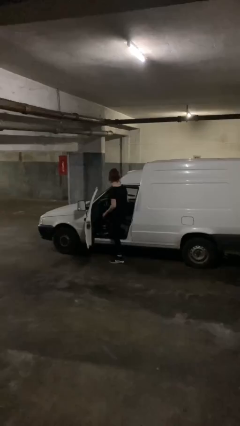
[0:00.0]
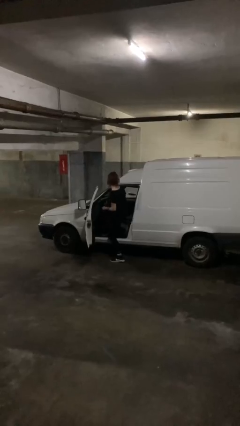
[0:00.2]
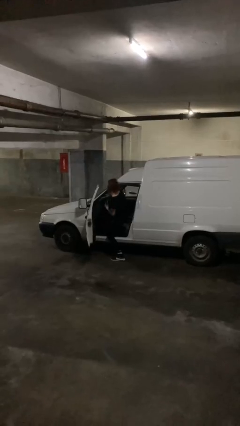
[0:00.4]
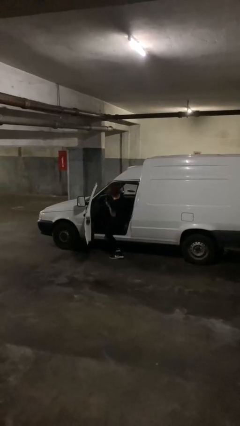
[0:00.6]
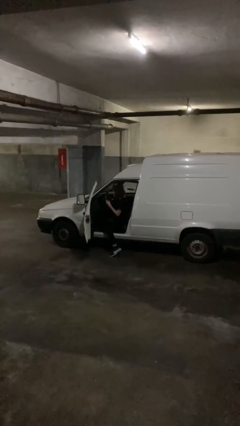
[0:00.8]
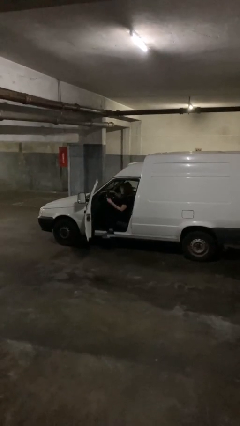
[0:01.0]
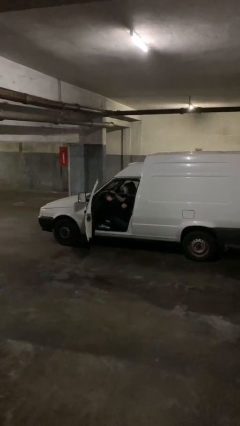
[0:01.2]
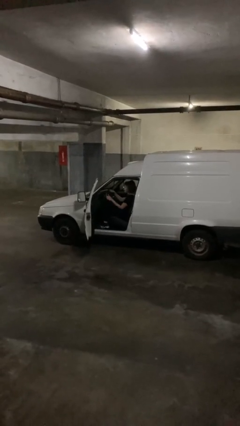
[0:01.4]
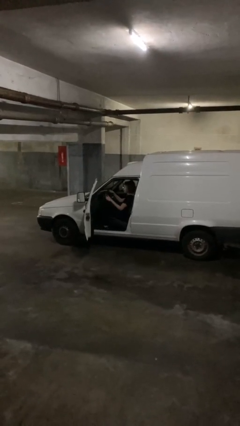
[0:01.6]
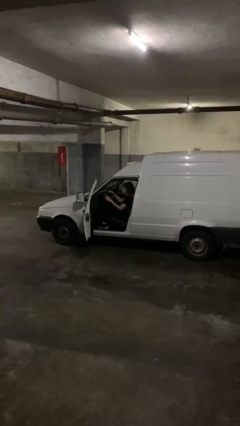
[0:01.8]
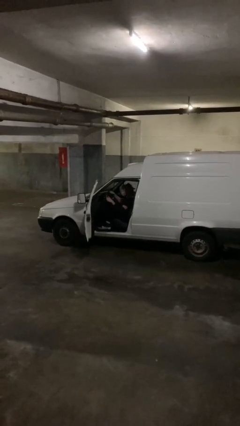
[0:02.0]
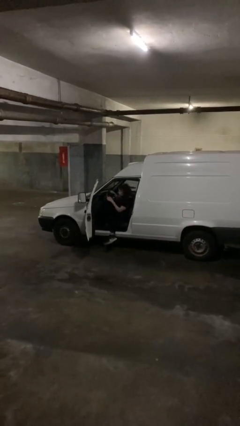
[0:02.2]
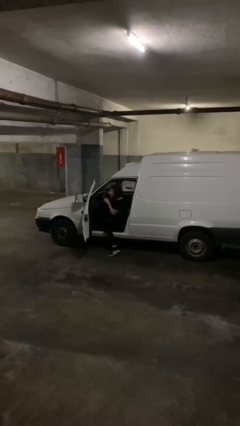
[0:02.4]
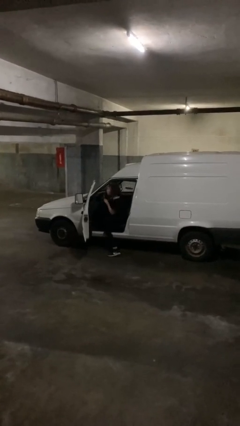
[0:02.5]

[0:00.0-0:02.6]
person enters car

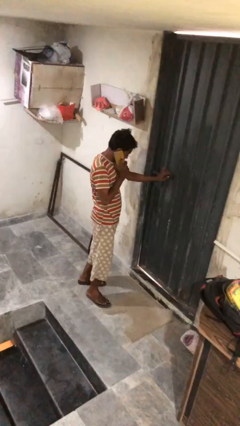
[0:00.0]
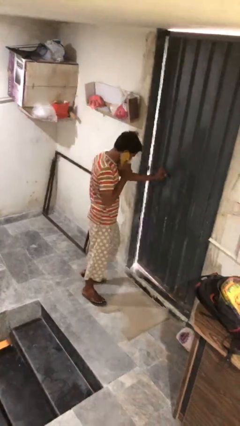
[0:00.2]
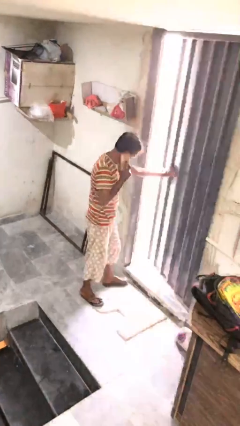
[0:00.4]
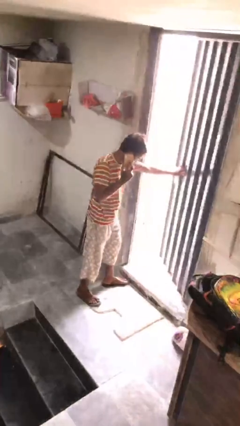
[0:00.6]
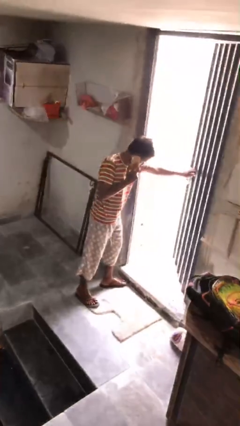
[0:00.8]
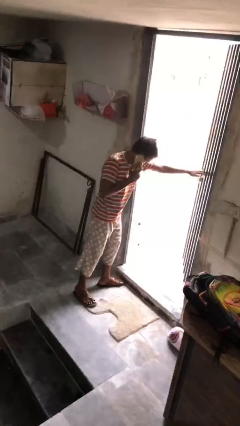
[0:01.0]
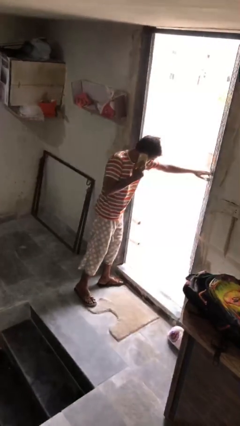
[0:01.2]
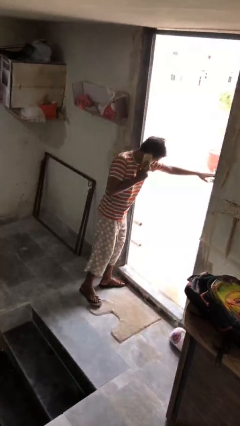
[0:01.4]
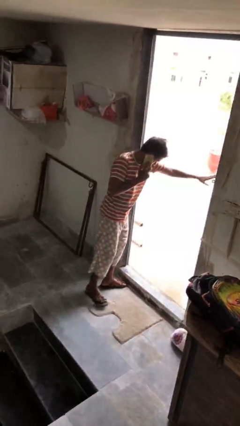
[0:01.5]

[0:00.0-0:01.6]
person opens facility door

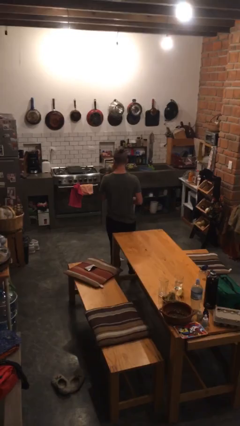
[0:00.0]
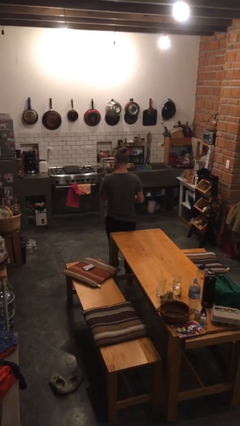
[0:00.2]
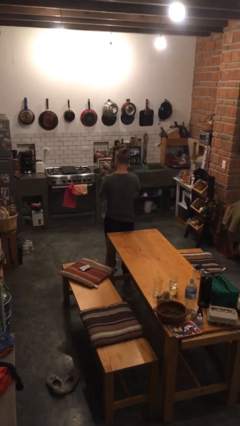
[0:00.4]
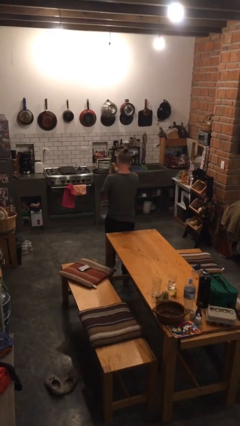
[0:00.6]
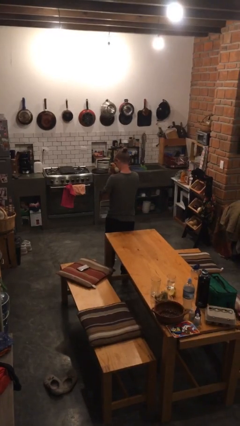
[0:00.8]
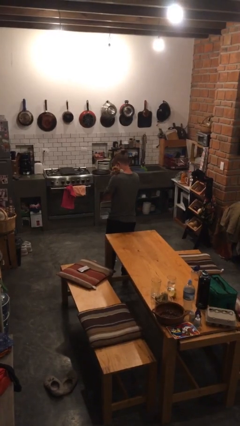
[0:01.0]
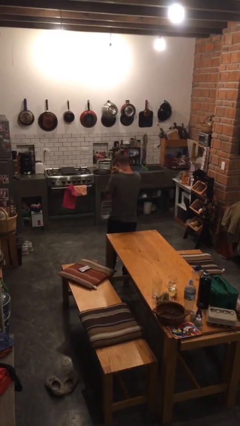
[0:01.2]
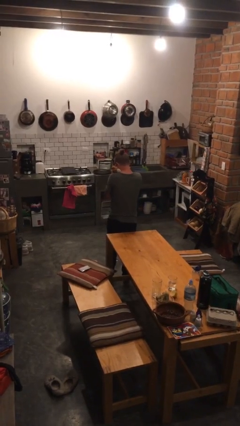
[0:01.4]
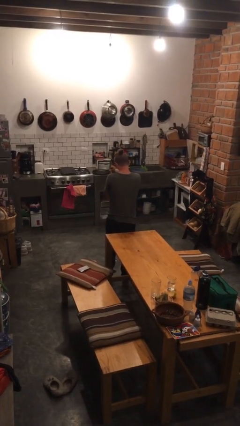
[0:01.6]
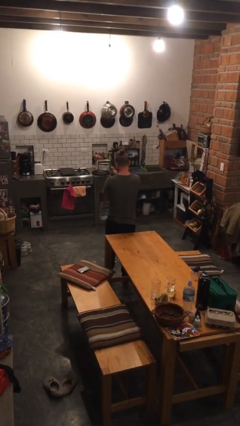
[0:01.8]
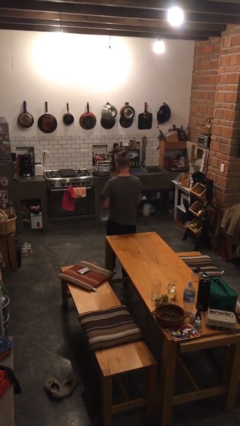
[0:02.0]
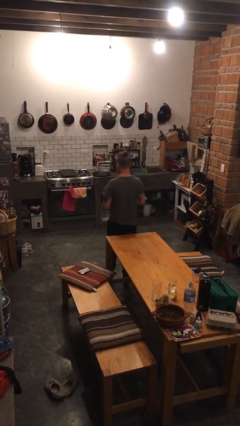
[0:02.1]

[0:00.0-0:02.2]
person hugs stuffed animal

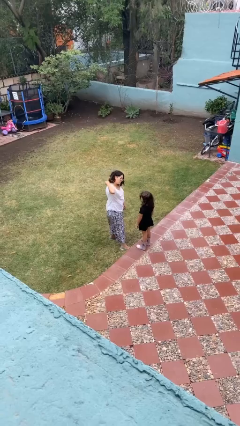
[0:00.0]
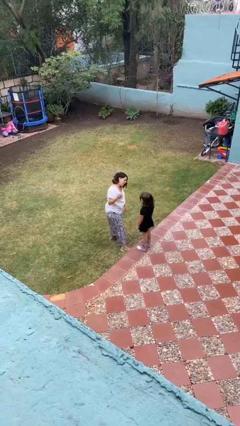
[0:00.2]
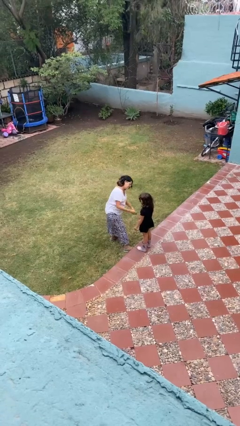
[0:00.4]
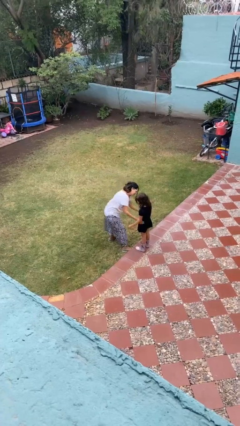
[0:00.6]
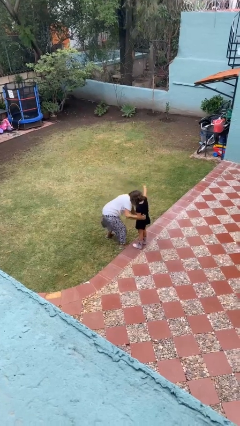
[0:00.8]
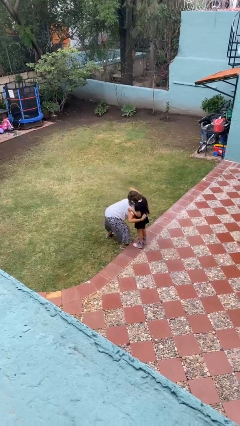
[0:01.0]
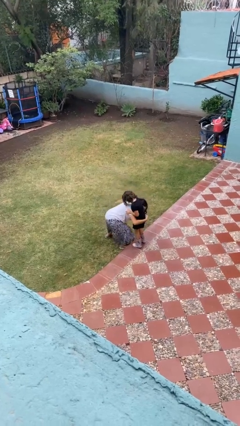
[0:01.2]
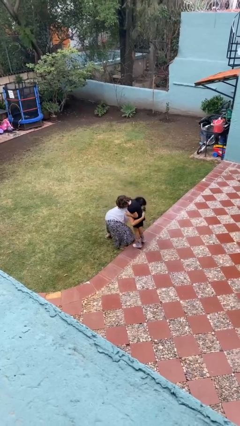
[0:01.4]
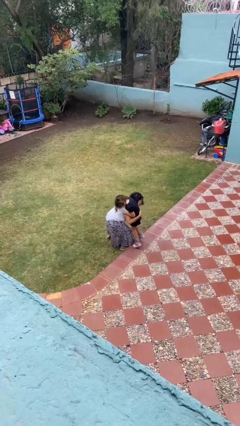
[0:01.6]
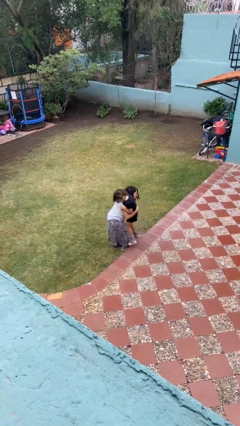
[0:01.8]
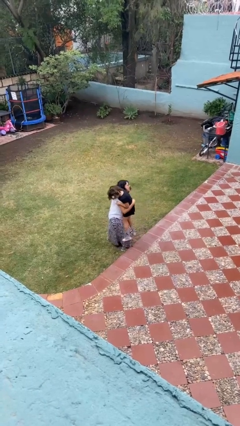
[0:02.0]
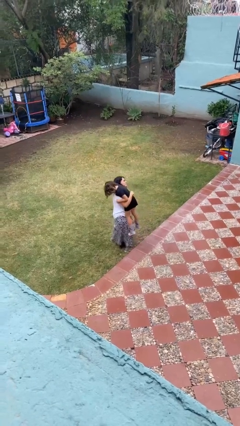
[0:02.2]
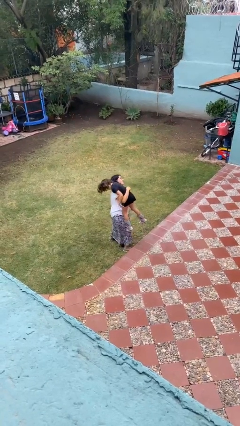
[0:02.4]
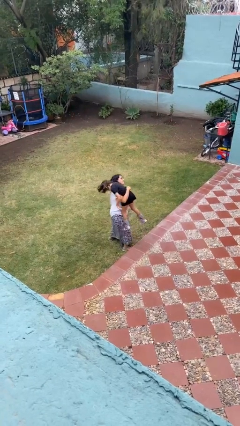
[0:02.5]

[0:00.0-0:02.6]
person carries person over shoulder

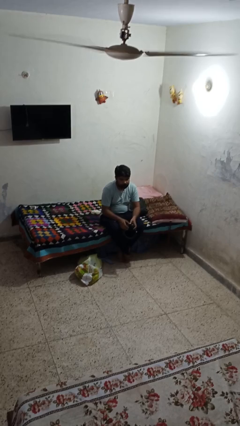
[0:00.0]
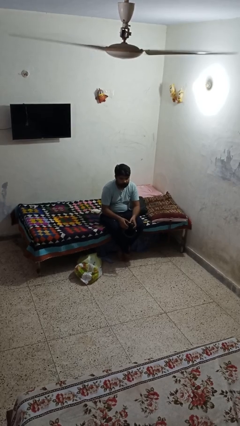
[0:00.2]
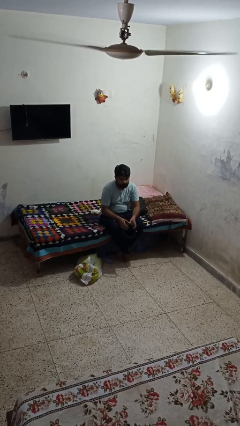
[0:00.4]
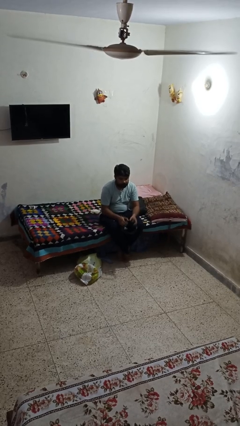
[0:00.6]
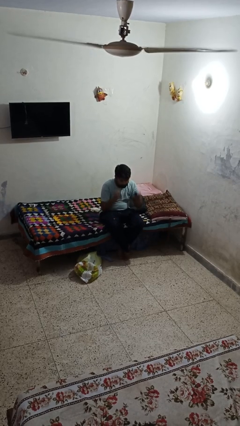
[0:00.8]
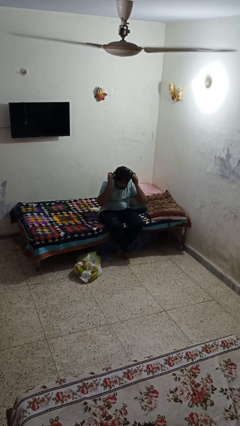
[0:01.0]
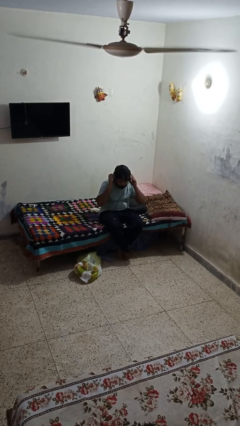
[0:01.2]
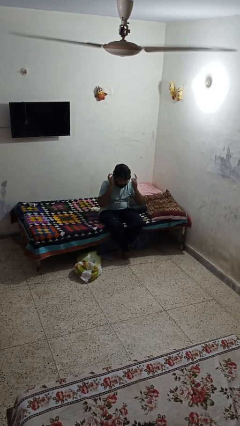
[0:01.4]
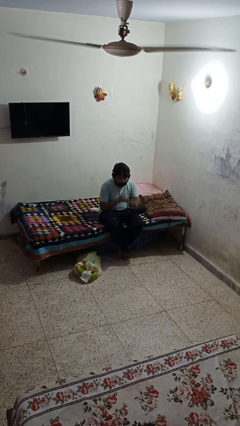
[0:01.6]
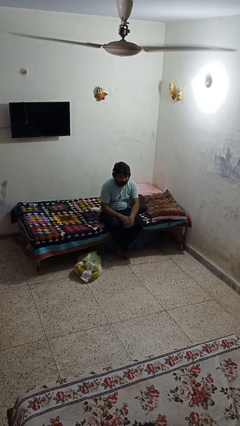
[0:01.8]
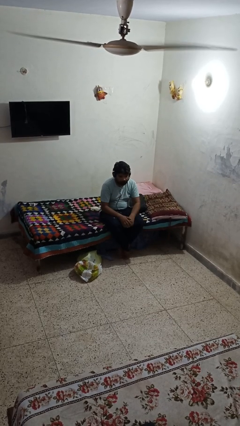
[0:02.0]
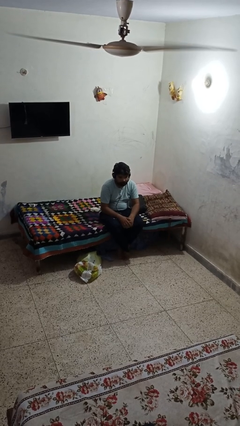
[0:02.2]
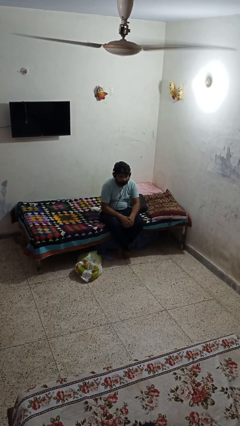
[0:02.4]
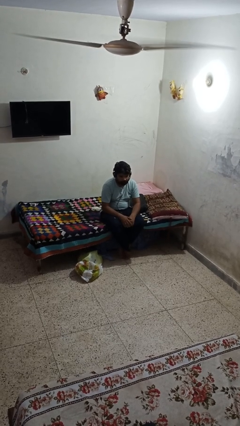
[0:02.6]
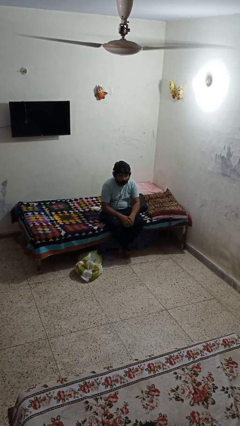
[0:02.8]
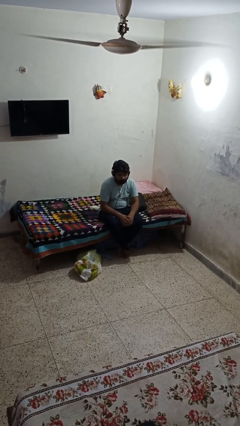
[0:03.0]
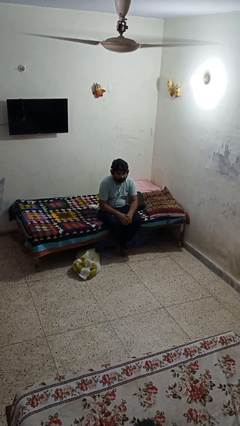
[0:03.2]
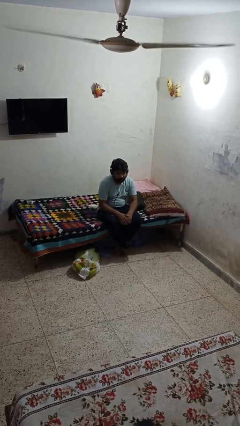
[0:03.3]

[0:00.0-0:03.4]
person puts on headphones

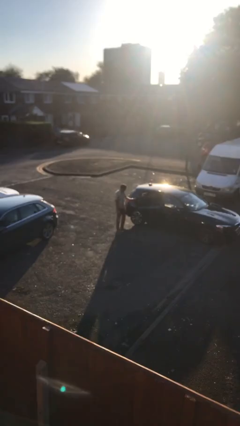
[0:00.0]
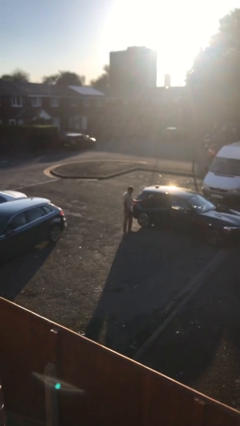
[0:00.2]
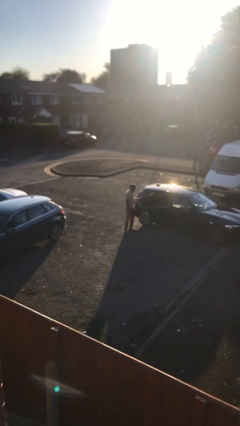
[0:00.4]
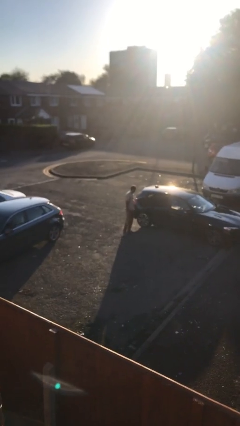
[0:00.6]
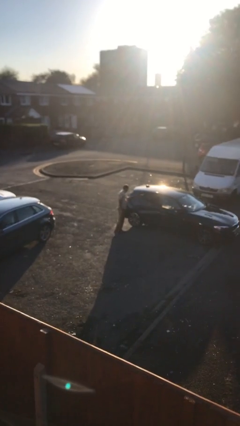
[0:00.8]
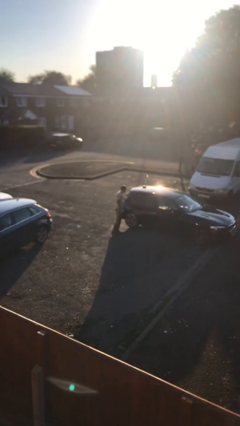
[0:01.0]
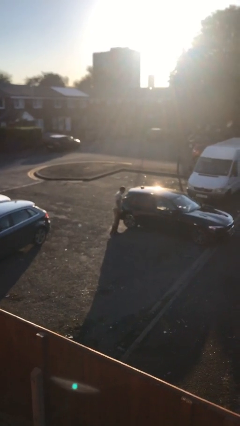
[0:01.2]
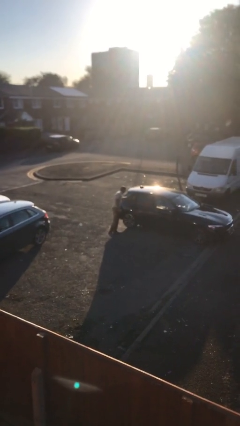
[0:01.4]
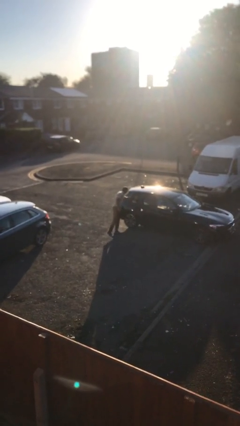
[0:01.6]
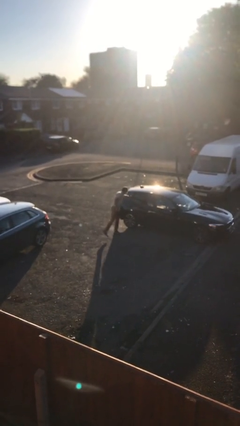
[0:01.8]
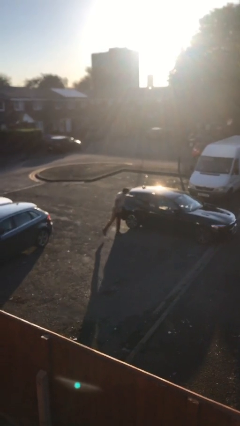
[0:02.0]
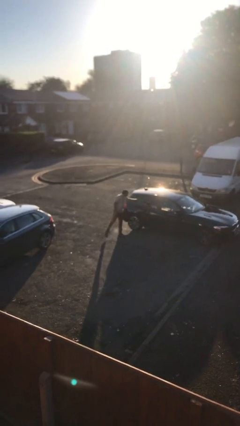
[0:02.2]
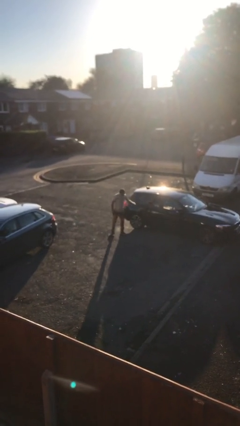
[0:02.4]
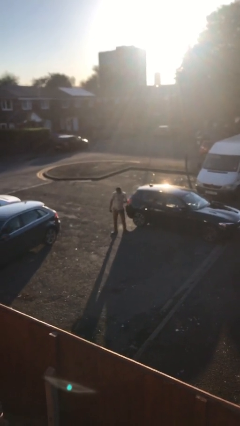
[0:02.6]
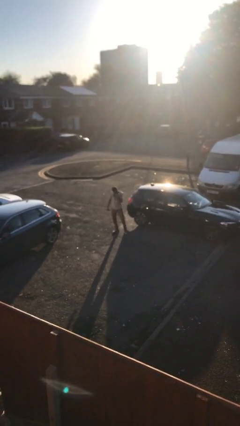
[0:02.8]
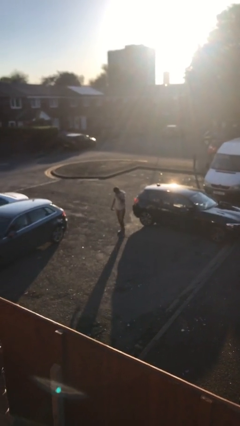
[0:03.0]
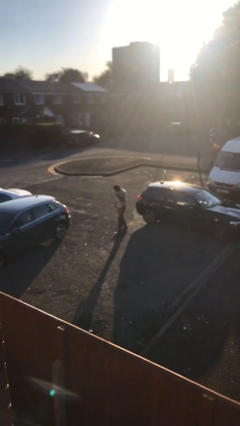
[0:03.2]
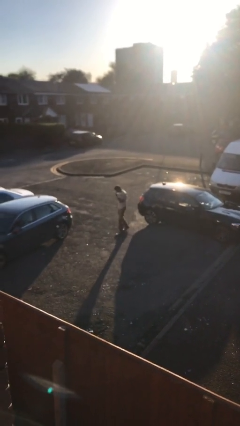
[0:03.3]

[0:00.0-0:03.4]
person closes car door

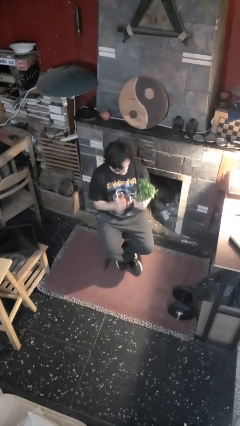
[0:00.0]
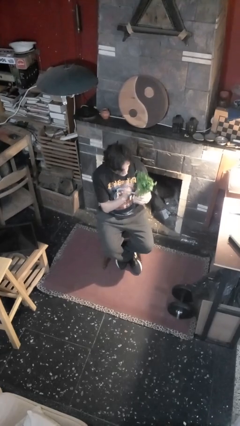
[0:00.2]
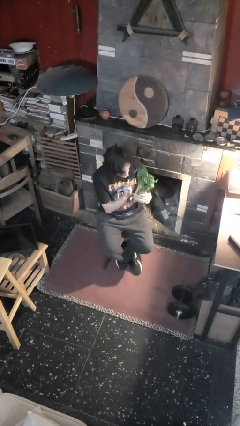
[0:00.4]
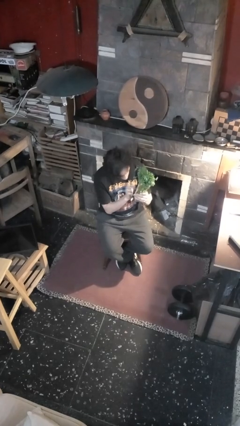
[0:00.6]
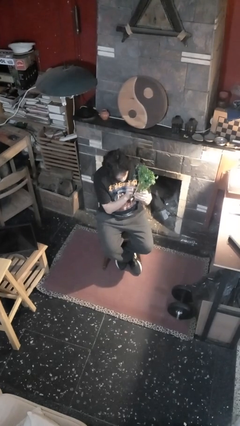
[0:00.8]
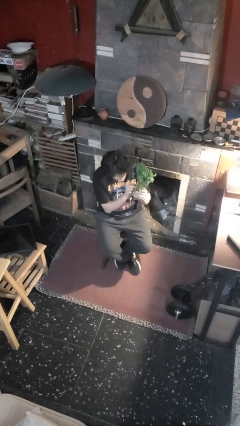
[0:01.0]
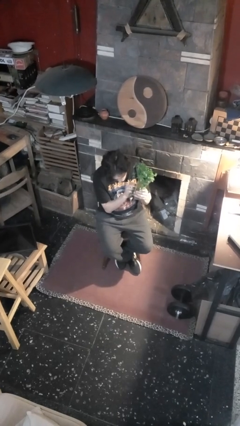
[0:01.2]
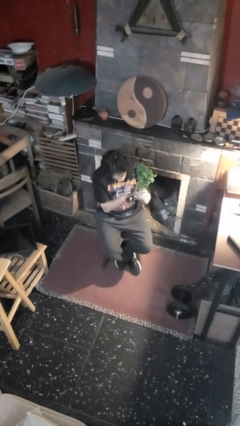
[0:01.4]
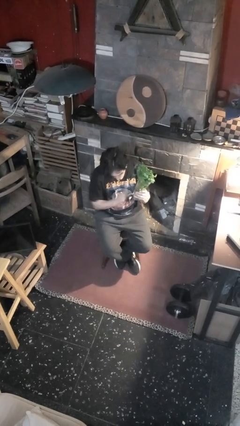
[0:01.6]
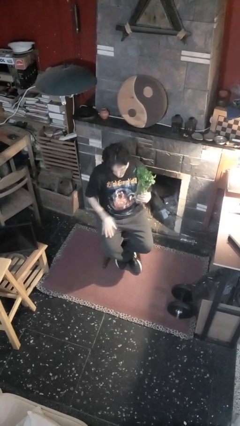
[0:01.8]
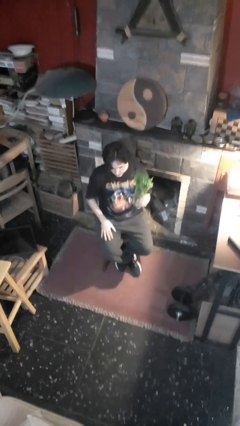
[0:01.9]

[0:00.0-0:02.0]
person taps object with finger
